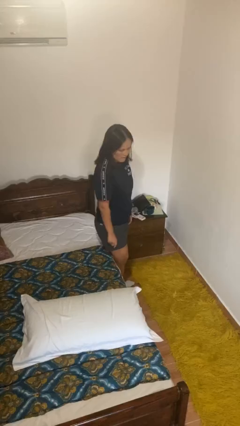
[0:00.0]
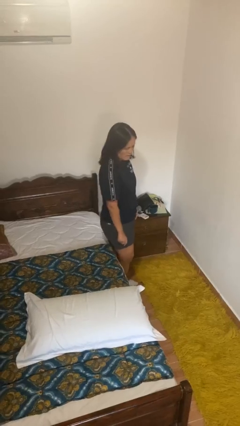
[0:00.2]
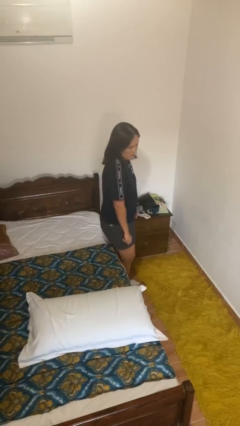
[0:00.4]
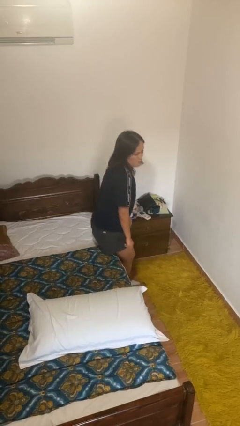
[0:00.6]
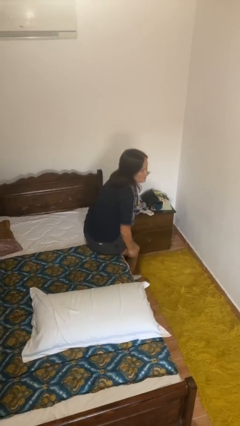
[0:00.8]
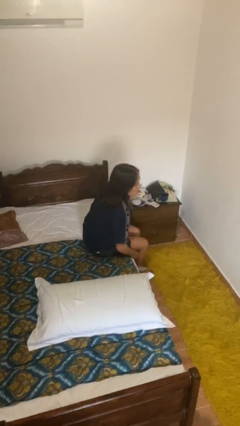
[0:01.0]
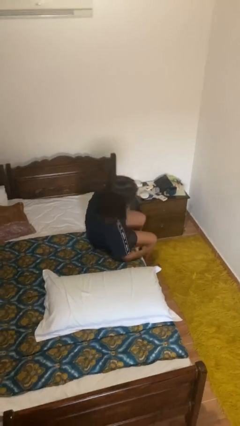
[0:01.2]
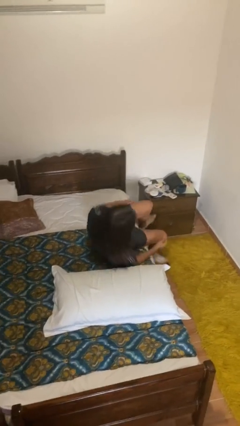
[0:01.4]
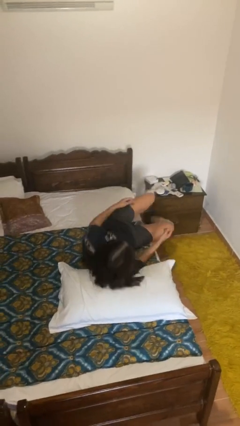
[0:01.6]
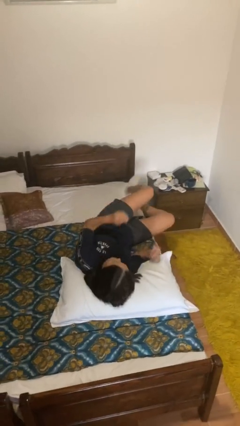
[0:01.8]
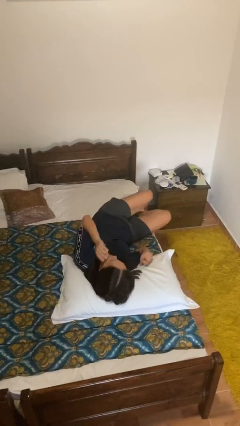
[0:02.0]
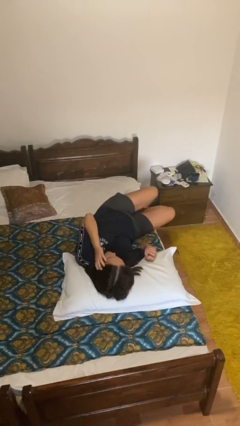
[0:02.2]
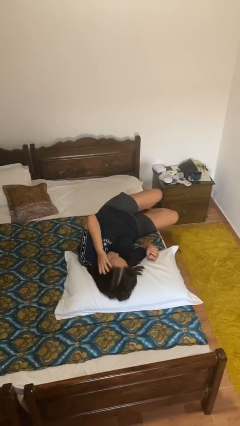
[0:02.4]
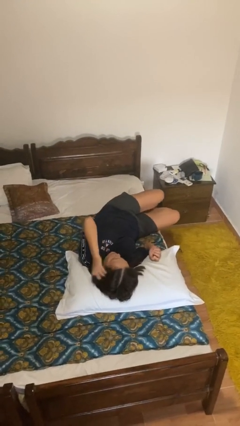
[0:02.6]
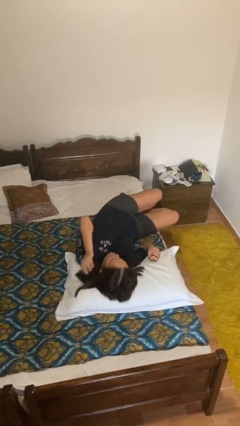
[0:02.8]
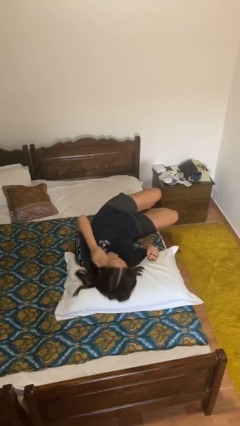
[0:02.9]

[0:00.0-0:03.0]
person lies down on bed

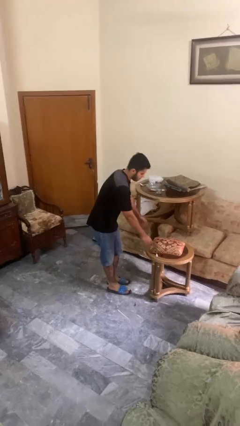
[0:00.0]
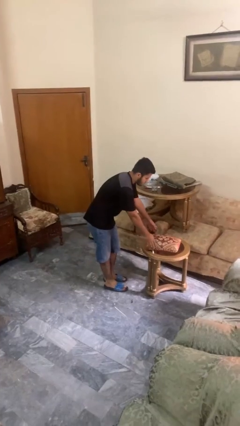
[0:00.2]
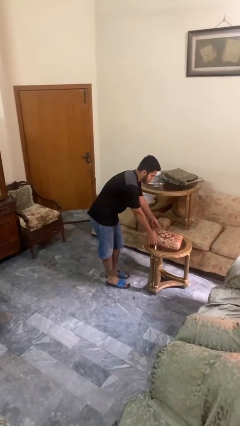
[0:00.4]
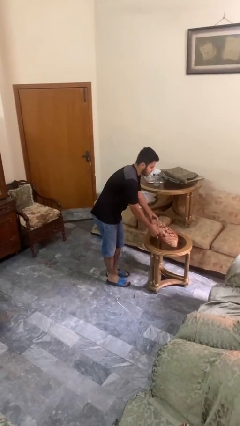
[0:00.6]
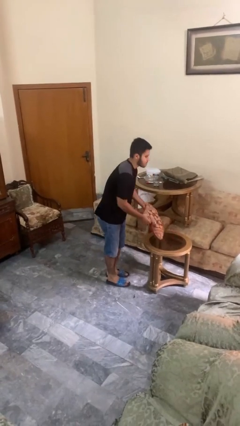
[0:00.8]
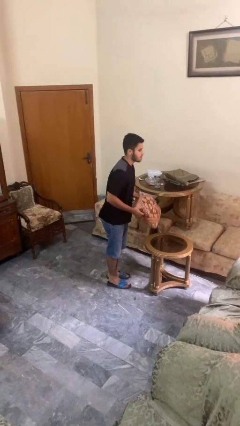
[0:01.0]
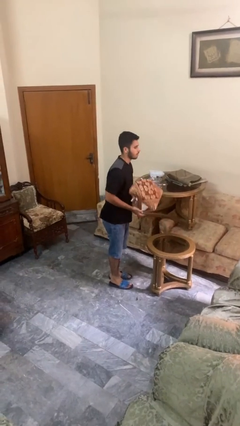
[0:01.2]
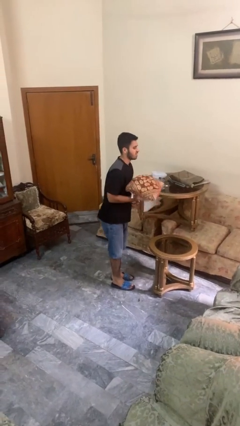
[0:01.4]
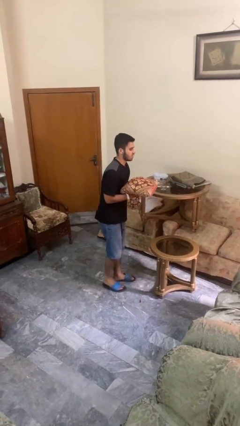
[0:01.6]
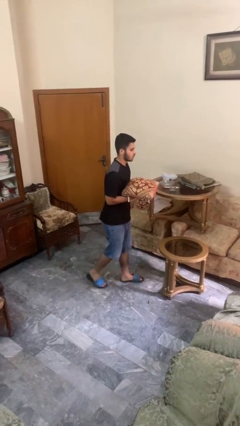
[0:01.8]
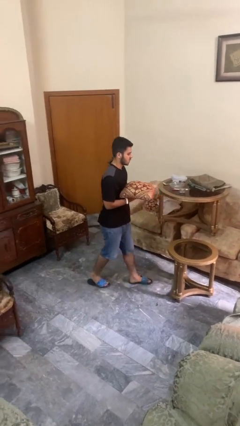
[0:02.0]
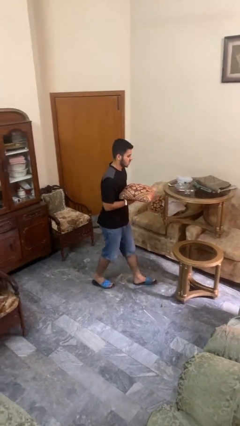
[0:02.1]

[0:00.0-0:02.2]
person picks up object from table

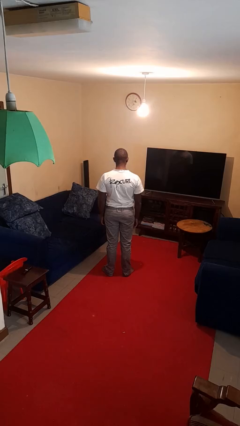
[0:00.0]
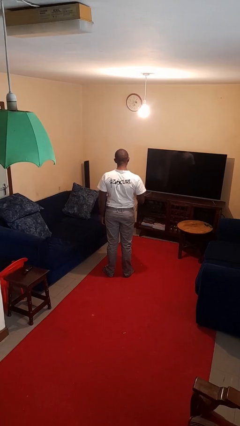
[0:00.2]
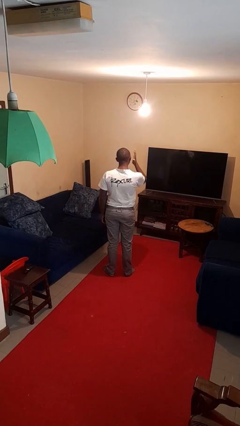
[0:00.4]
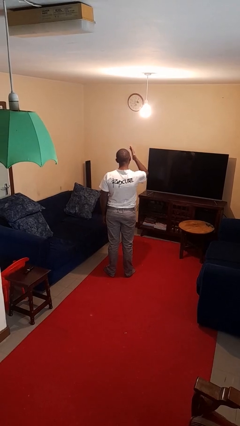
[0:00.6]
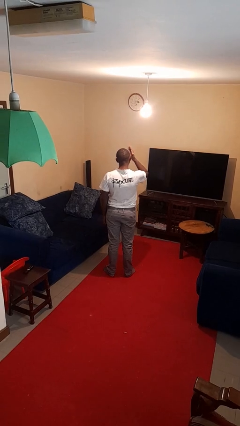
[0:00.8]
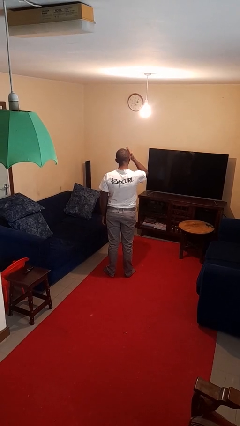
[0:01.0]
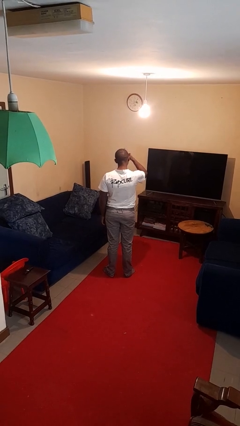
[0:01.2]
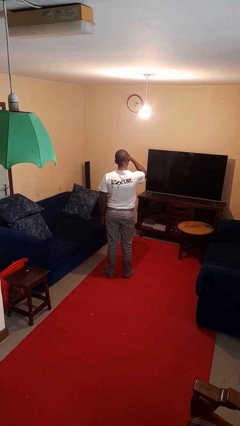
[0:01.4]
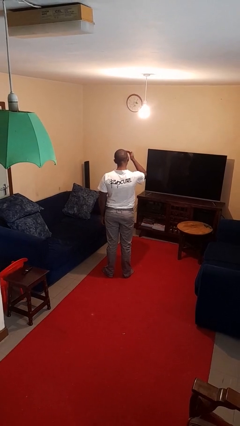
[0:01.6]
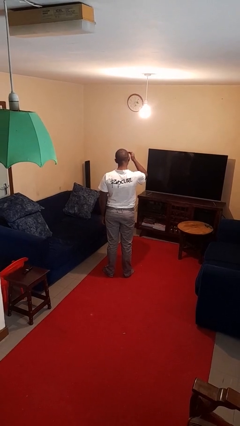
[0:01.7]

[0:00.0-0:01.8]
person swats bug

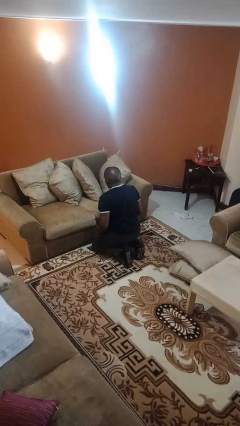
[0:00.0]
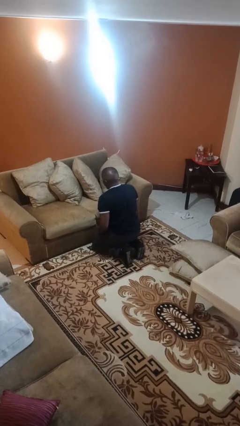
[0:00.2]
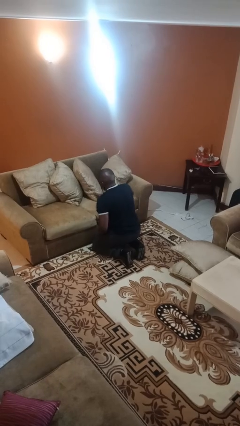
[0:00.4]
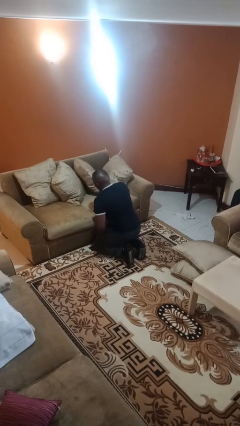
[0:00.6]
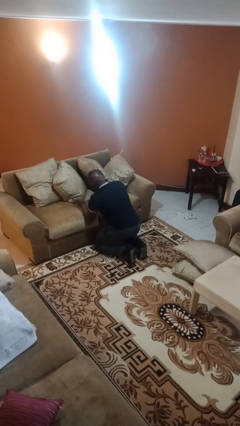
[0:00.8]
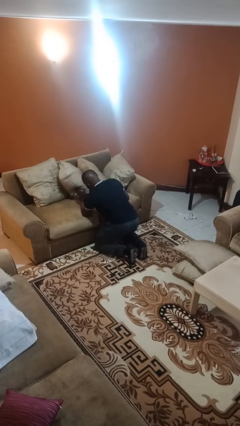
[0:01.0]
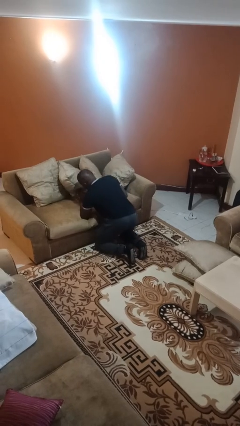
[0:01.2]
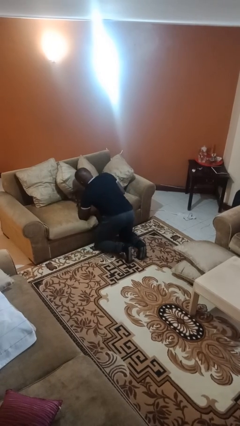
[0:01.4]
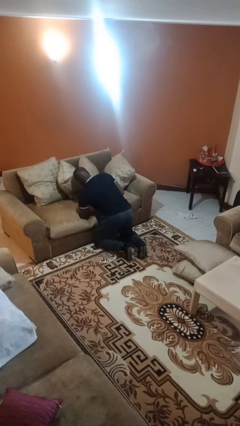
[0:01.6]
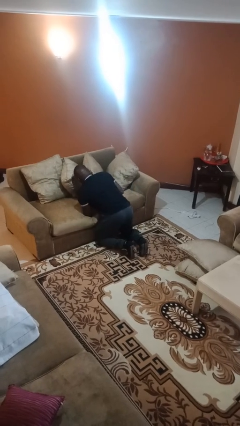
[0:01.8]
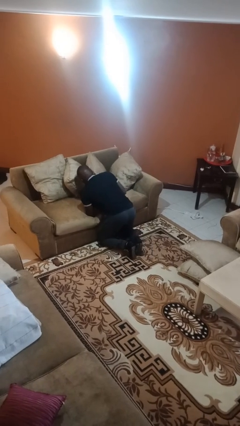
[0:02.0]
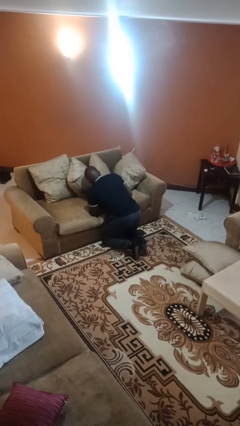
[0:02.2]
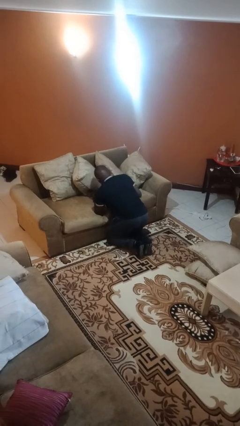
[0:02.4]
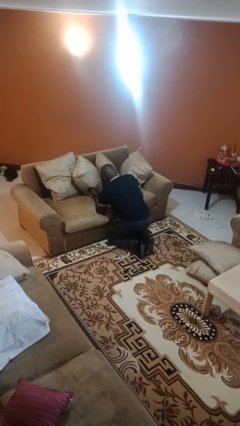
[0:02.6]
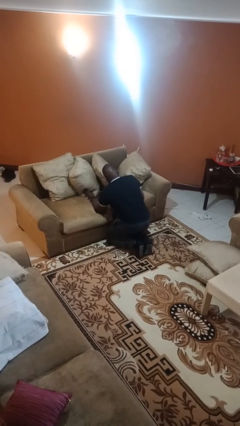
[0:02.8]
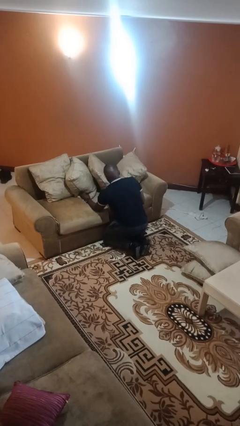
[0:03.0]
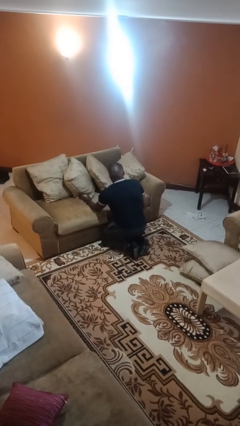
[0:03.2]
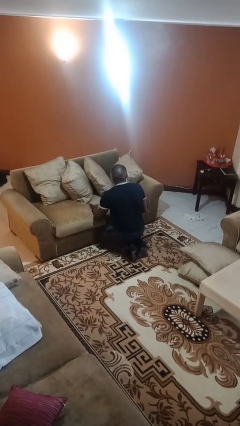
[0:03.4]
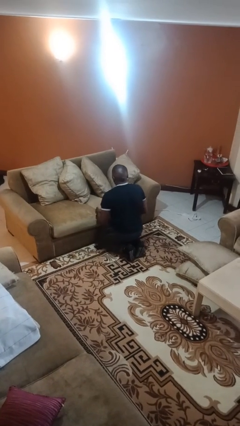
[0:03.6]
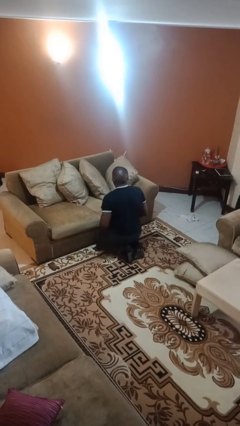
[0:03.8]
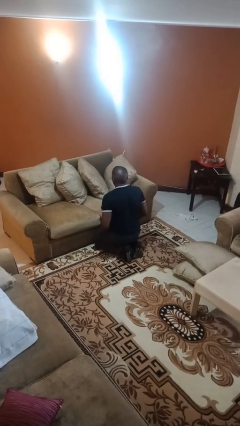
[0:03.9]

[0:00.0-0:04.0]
person searches in couch

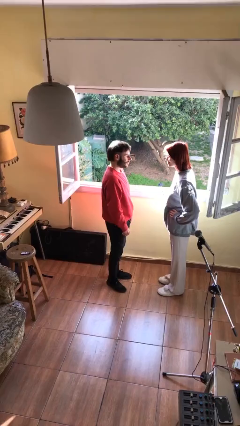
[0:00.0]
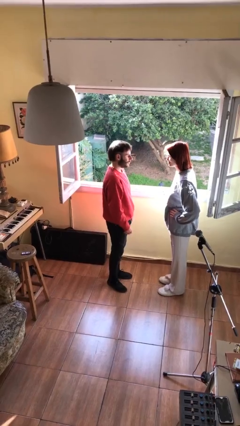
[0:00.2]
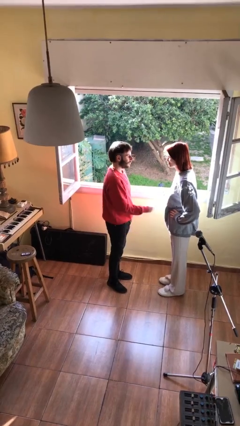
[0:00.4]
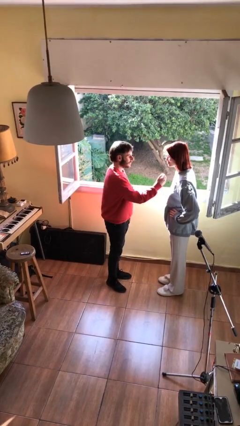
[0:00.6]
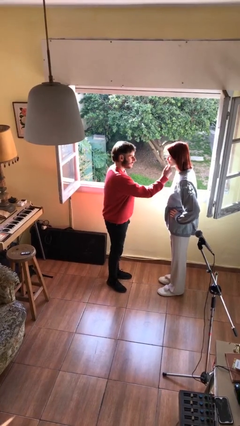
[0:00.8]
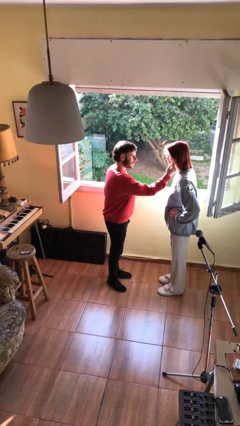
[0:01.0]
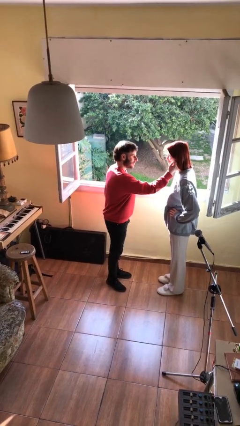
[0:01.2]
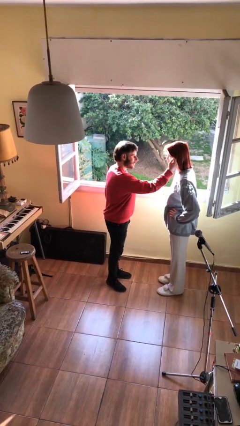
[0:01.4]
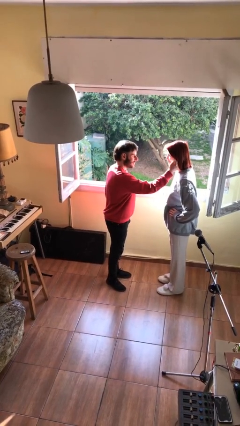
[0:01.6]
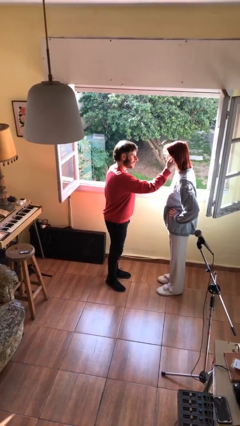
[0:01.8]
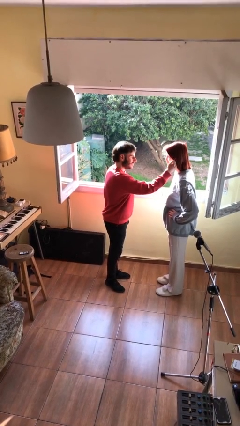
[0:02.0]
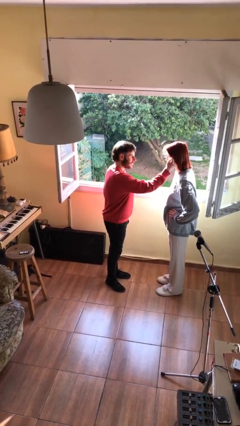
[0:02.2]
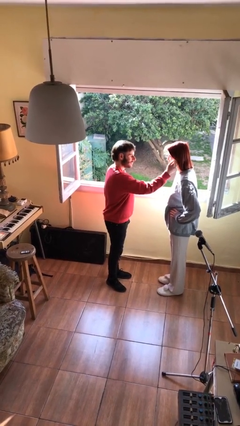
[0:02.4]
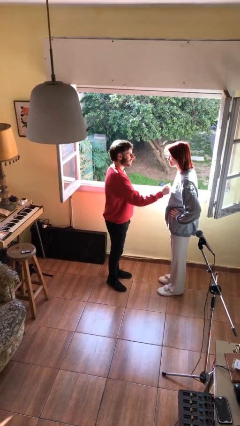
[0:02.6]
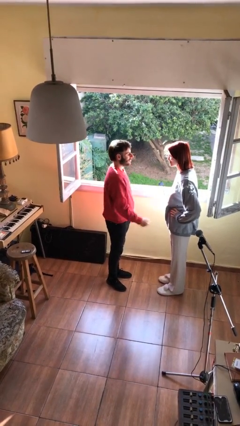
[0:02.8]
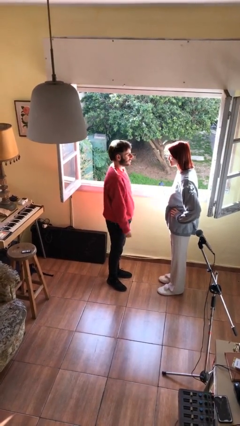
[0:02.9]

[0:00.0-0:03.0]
person touches face of person

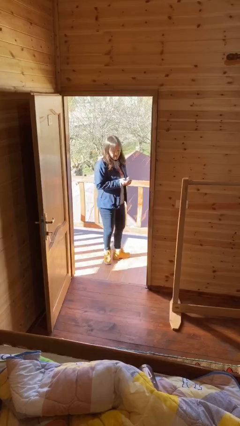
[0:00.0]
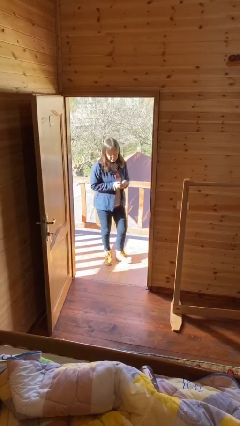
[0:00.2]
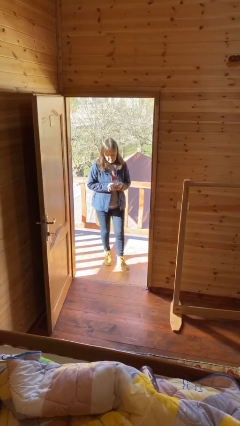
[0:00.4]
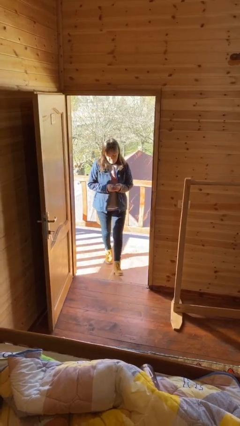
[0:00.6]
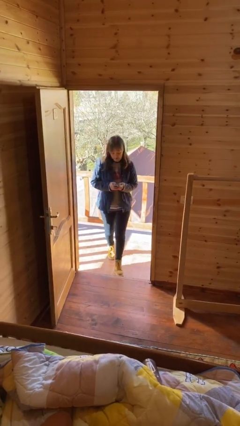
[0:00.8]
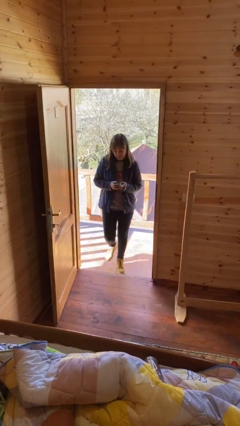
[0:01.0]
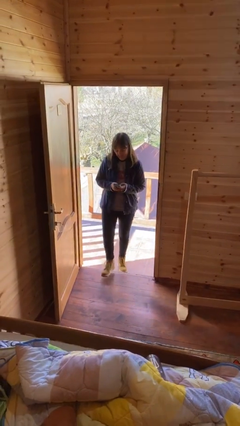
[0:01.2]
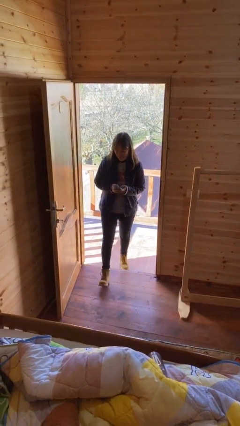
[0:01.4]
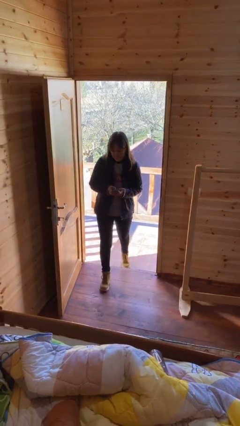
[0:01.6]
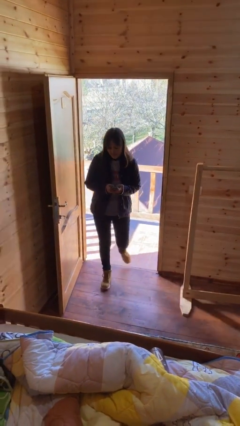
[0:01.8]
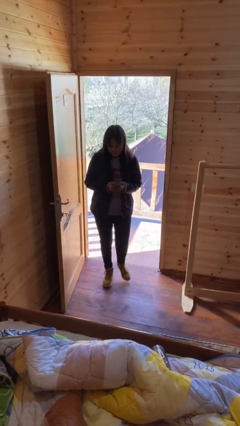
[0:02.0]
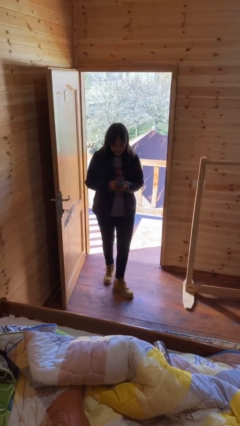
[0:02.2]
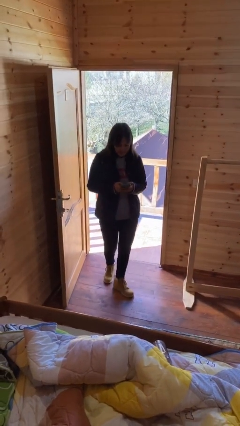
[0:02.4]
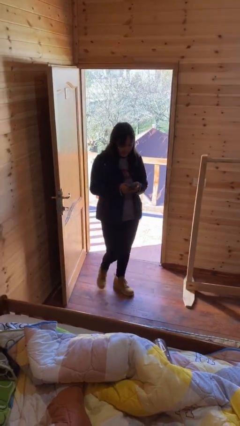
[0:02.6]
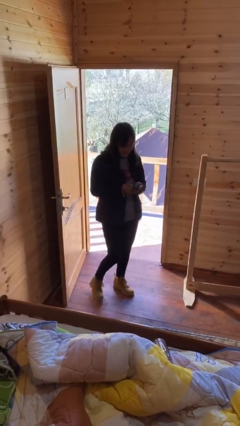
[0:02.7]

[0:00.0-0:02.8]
person enters scene through structure

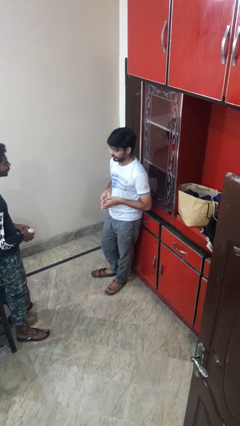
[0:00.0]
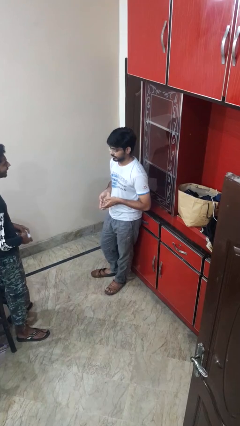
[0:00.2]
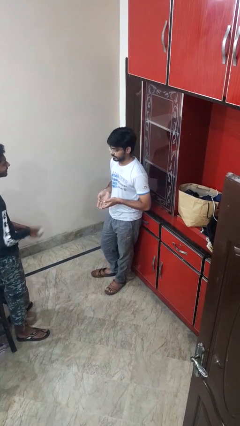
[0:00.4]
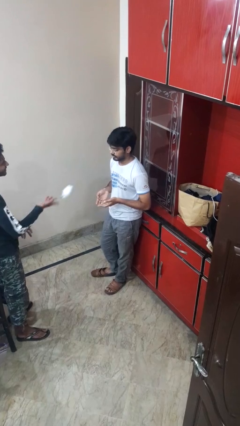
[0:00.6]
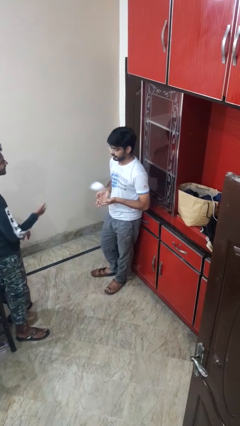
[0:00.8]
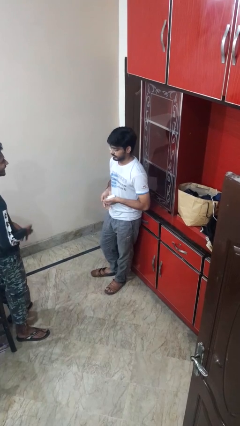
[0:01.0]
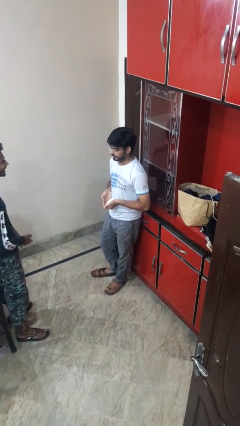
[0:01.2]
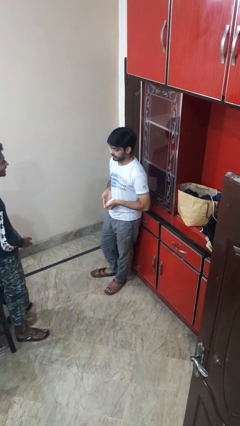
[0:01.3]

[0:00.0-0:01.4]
person catches object from person
